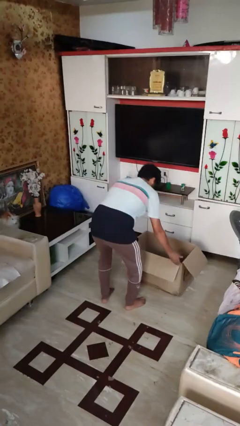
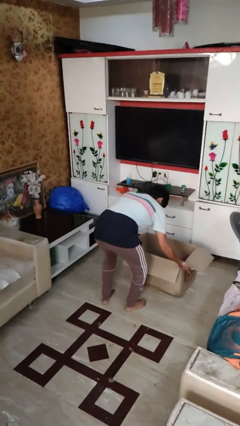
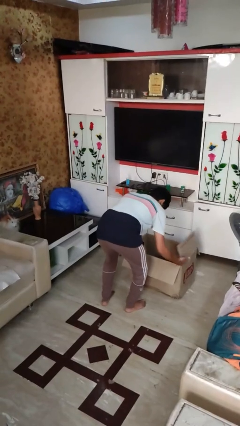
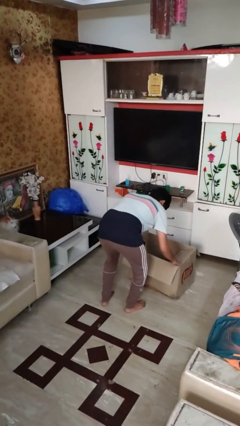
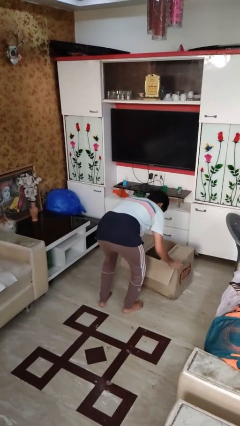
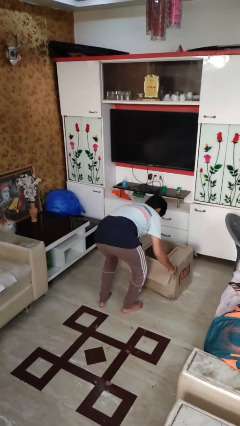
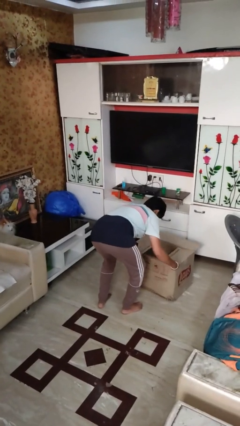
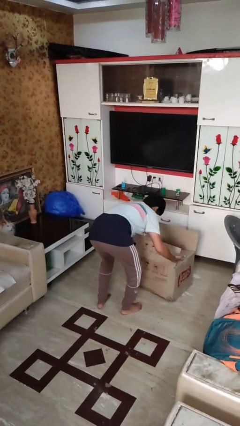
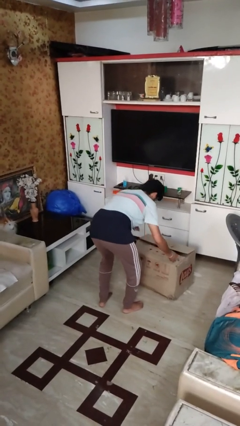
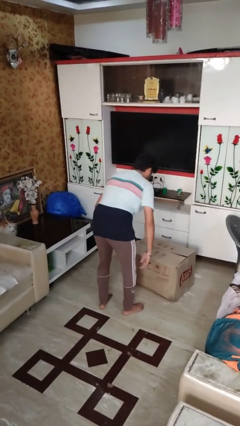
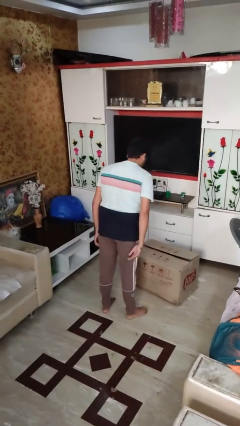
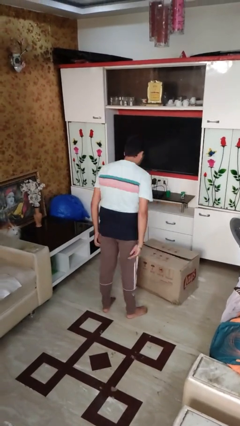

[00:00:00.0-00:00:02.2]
person closes box

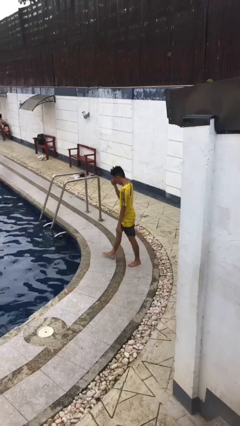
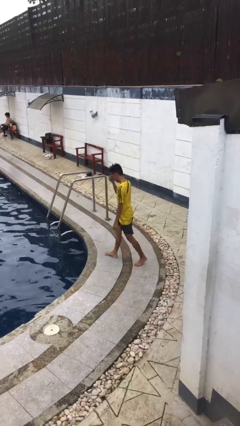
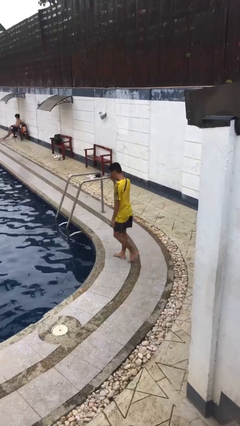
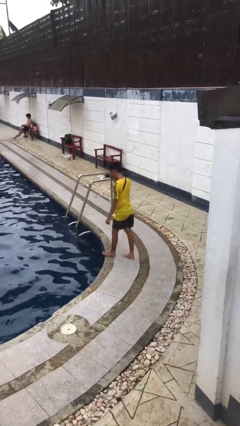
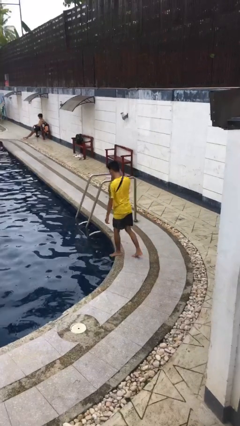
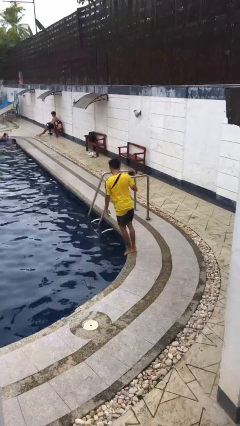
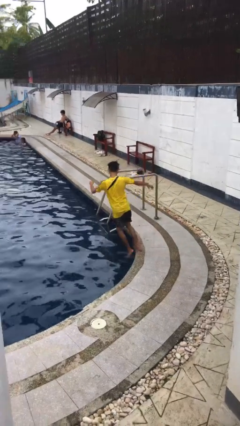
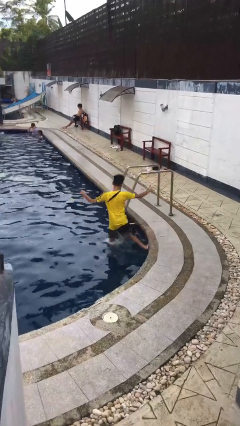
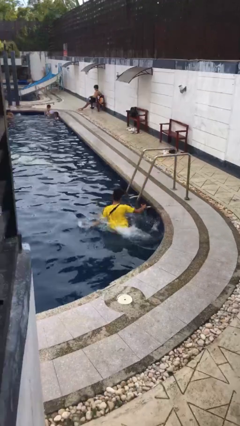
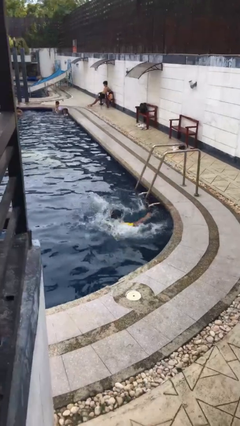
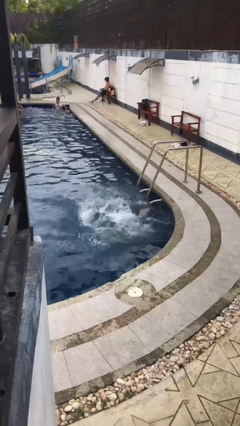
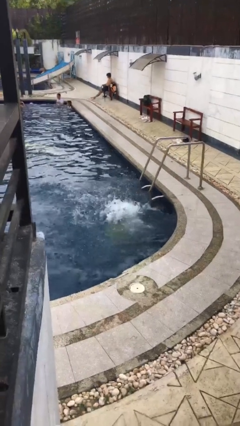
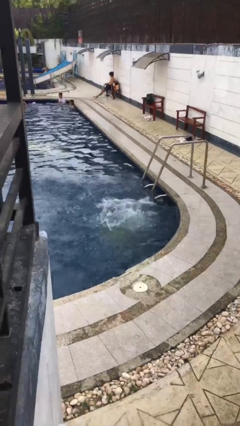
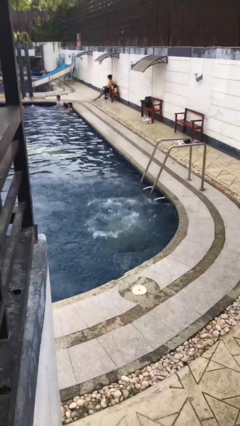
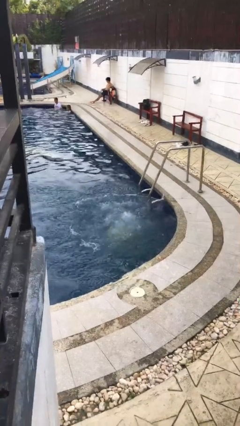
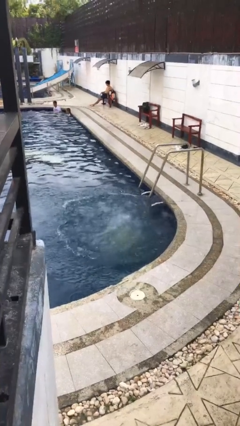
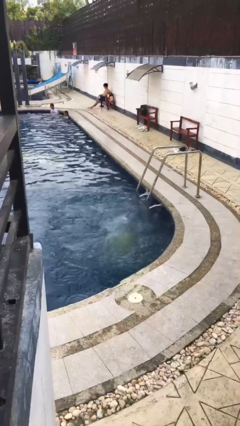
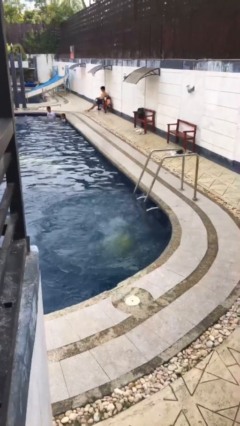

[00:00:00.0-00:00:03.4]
person falls into pool

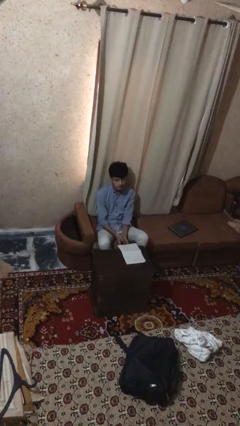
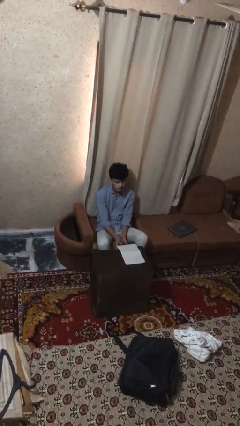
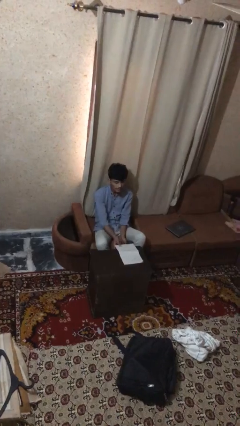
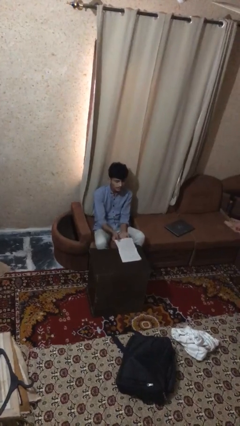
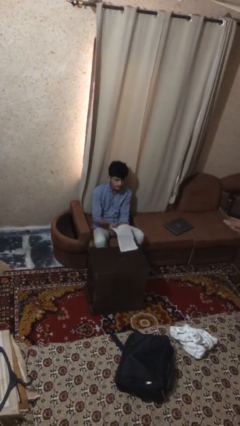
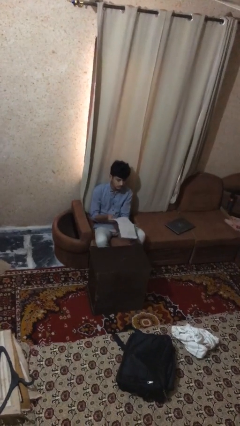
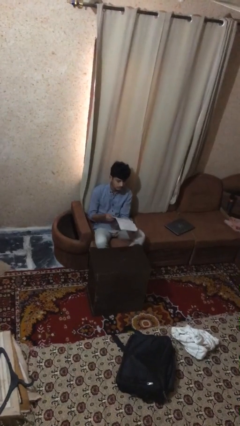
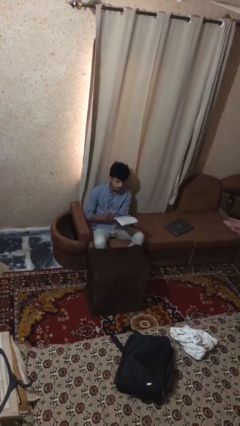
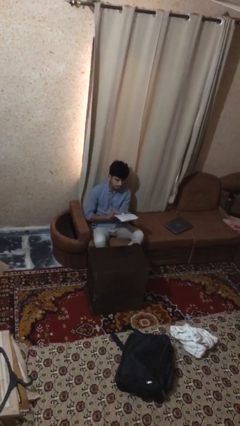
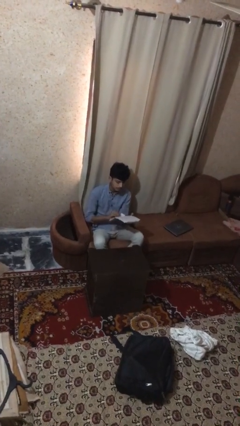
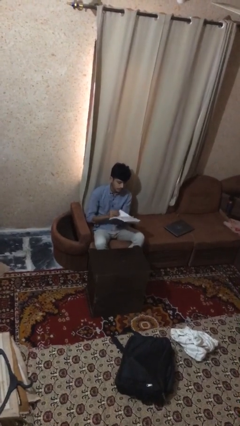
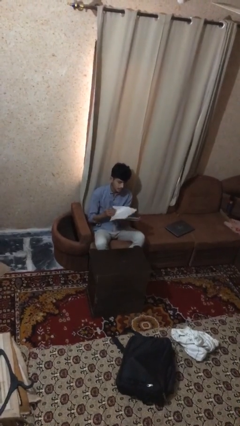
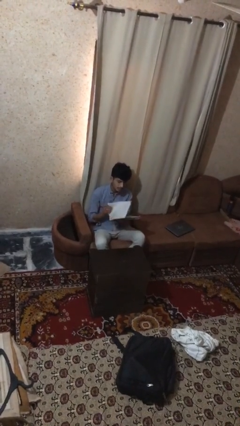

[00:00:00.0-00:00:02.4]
person picks up object from table

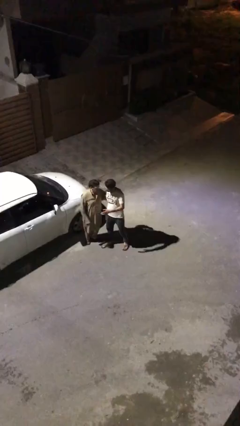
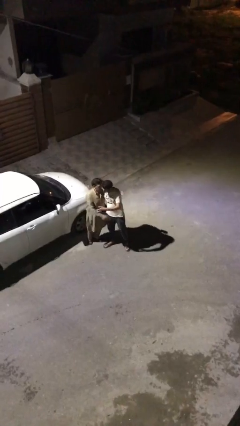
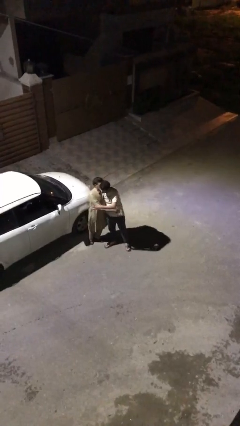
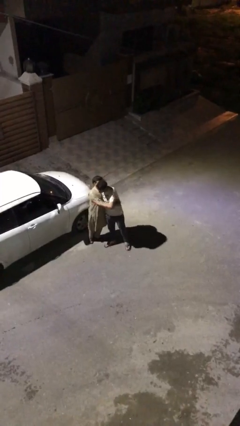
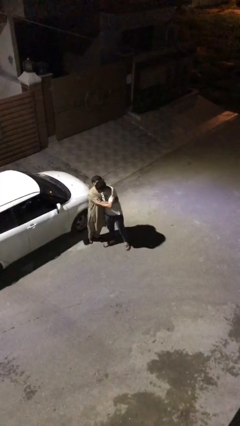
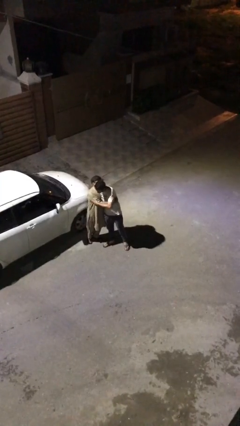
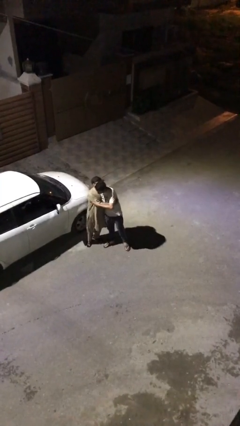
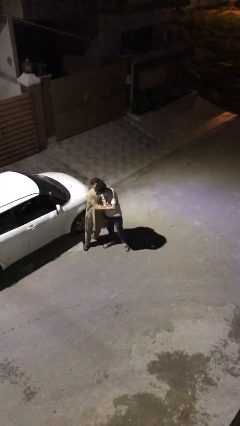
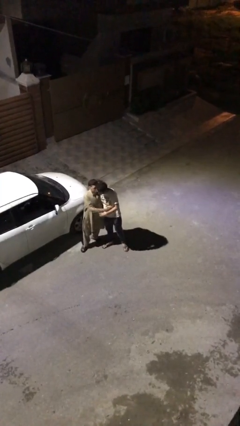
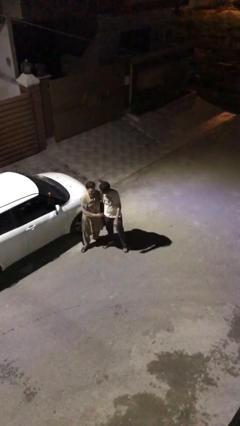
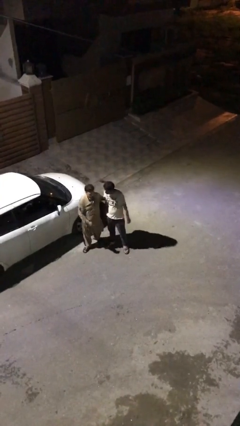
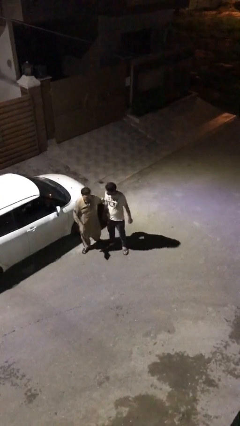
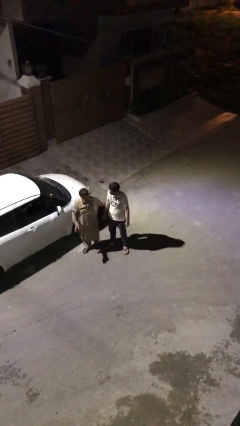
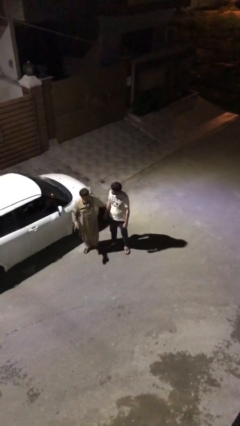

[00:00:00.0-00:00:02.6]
person embraces person

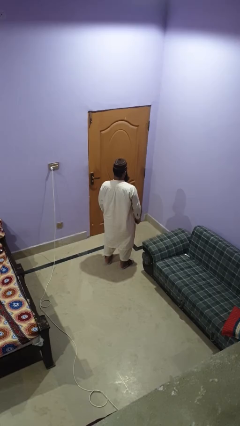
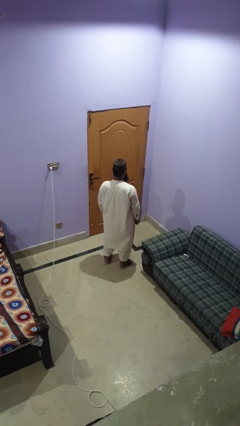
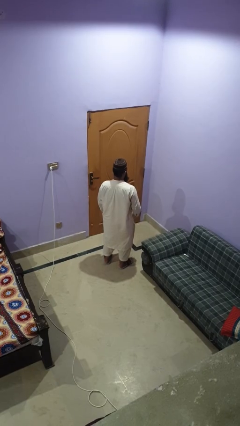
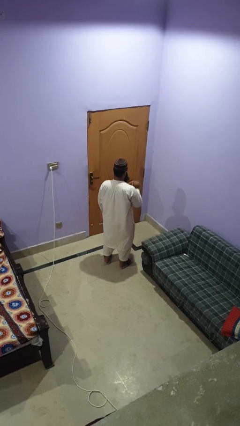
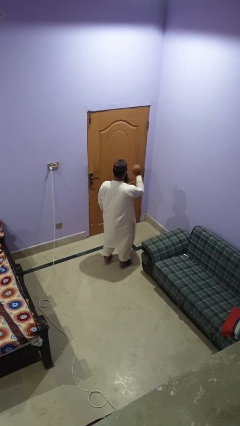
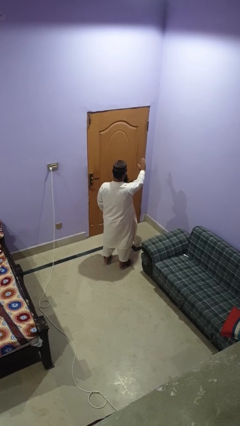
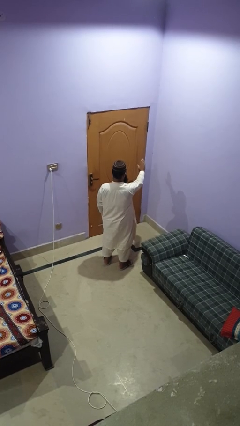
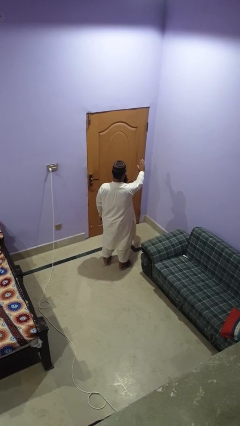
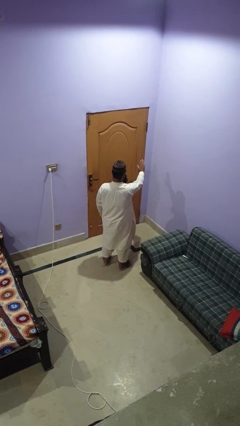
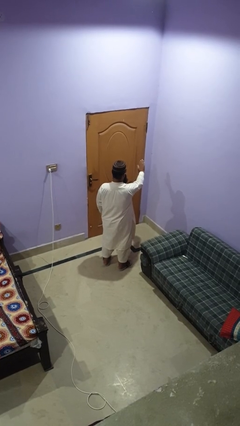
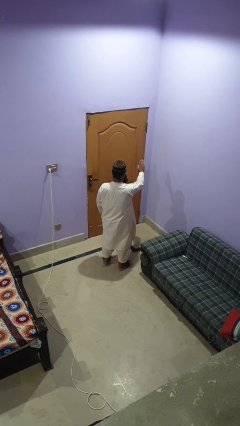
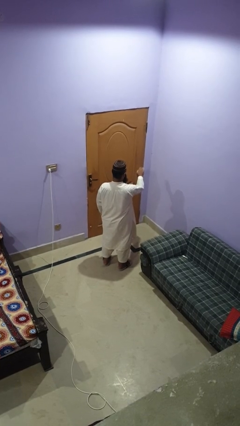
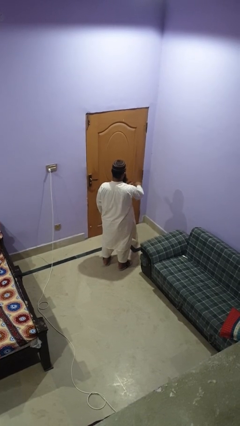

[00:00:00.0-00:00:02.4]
person gestures stop

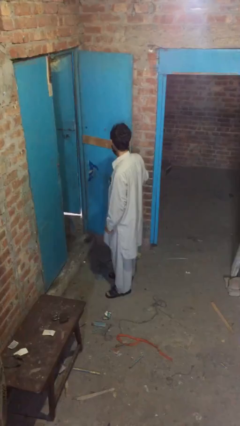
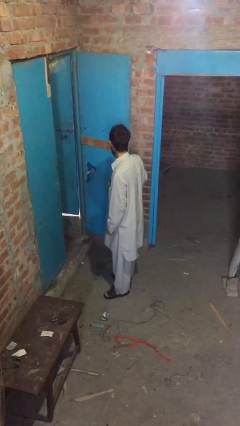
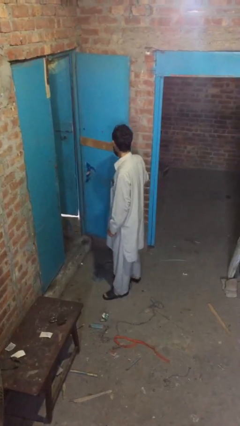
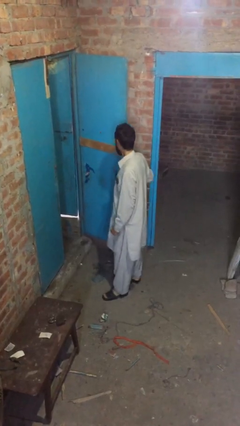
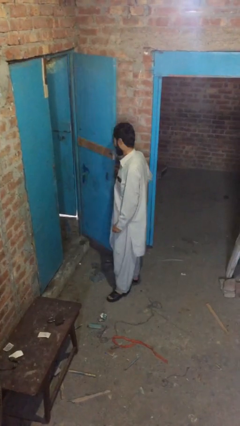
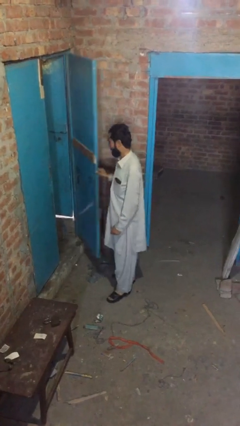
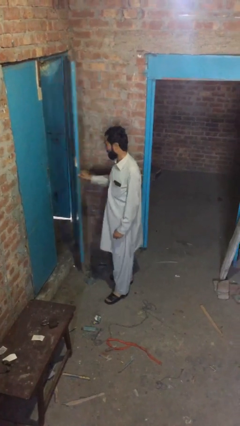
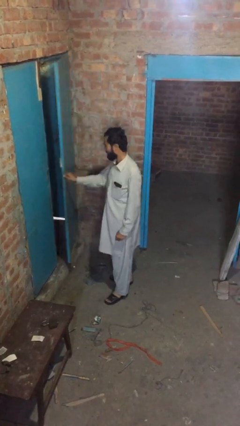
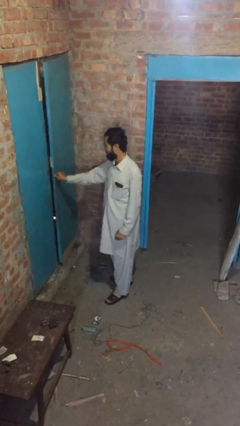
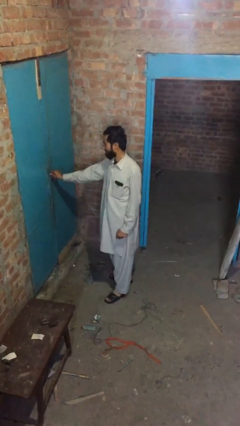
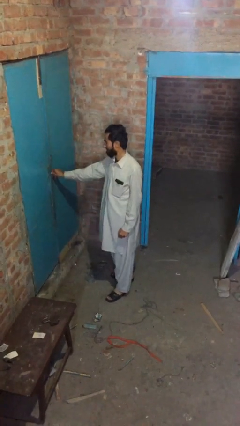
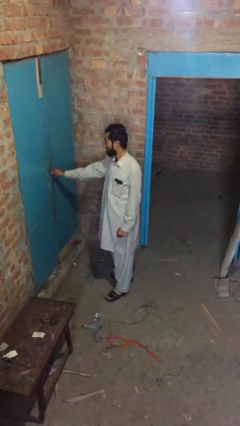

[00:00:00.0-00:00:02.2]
person closes facility door

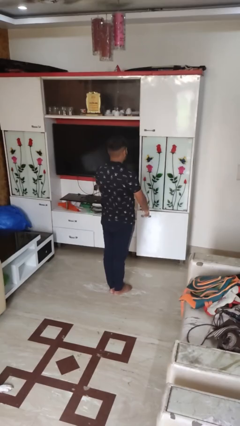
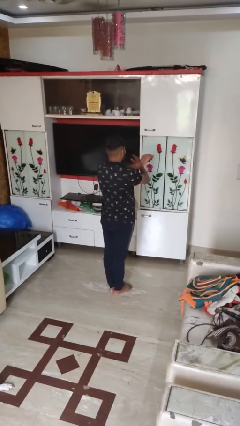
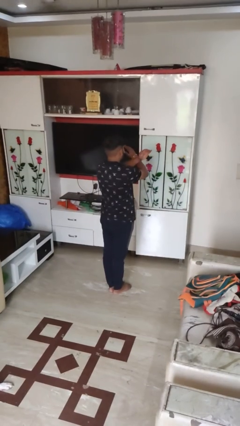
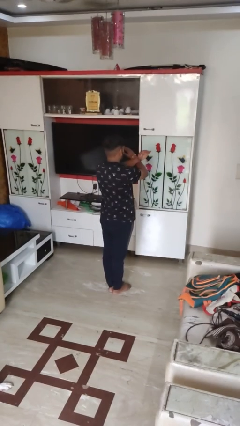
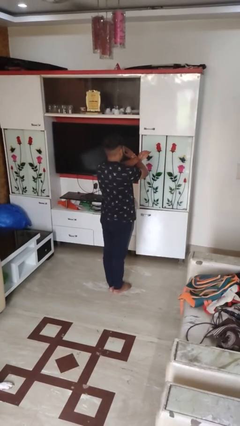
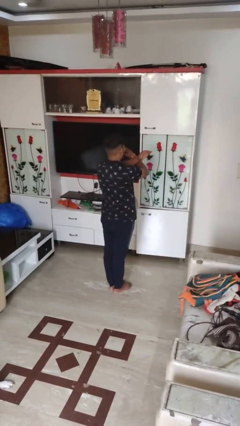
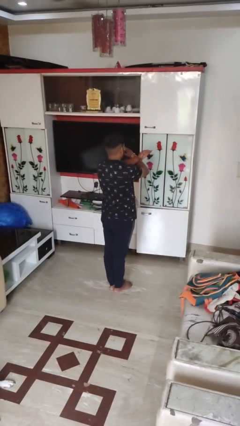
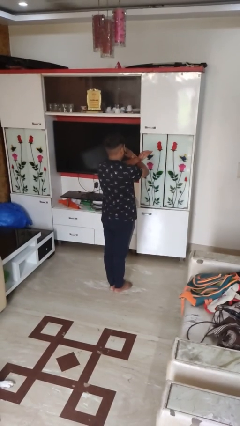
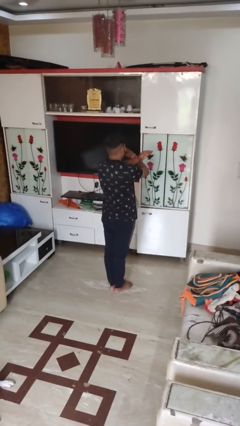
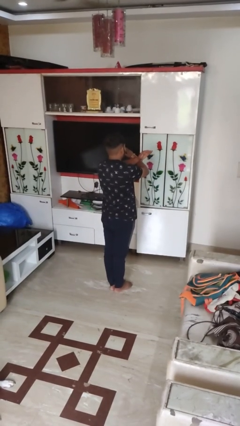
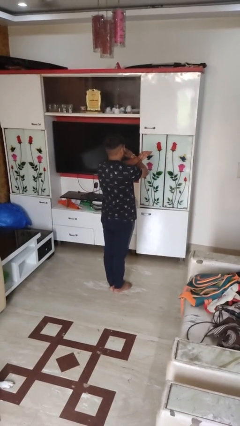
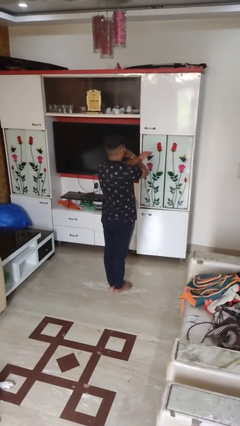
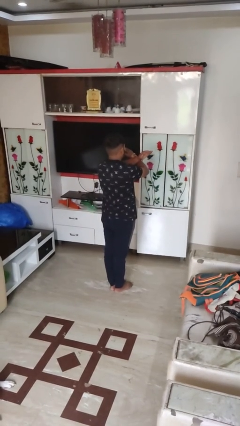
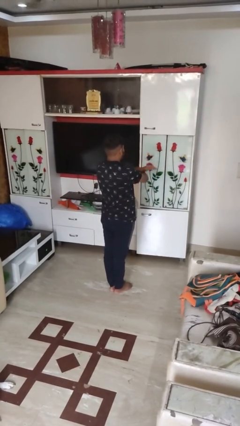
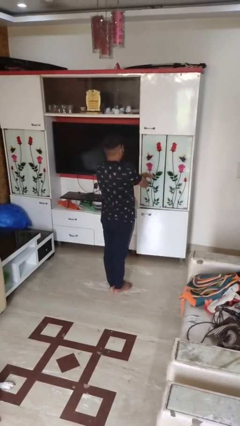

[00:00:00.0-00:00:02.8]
person gestures arms x
